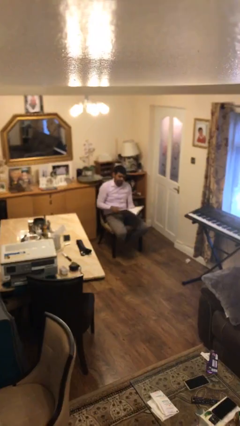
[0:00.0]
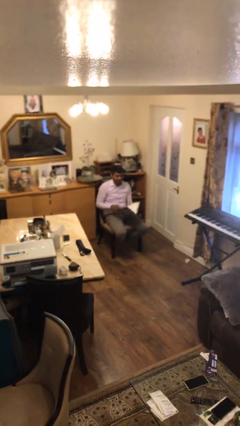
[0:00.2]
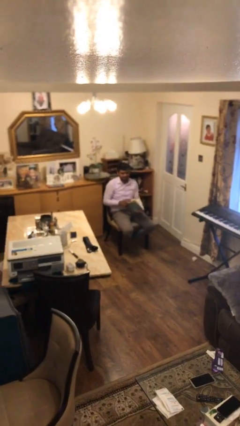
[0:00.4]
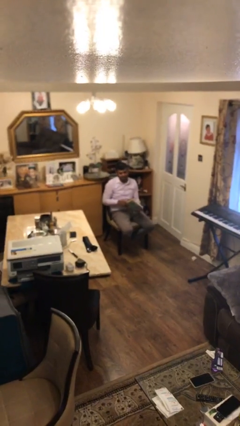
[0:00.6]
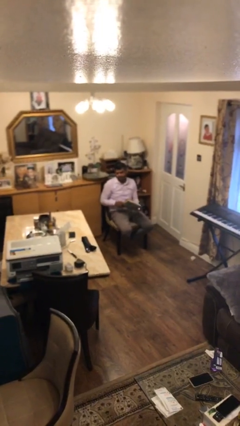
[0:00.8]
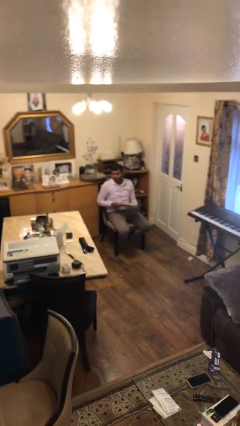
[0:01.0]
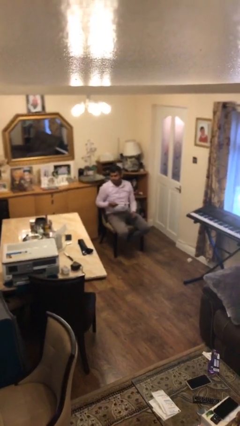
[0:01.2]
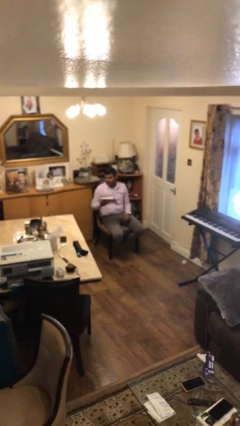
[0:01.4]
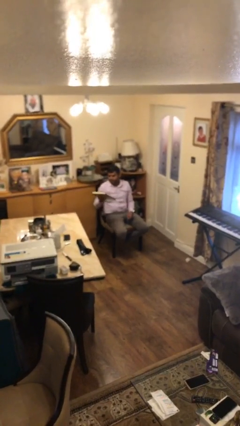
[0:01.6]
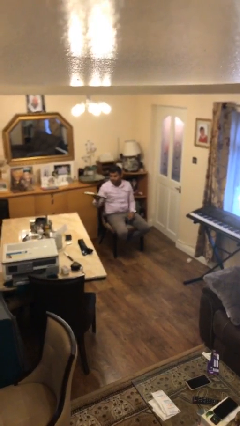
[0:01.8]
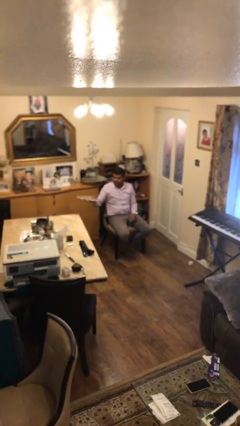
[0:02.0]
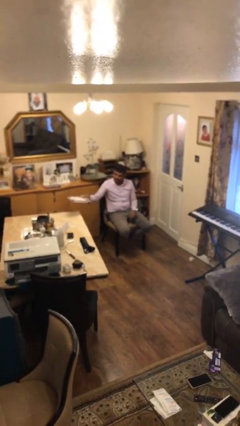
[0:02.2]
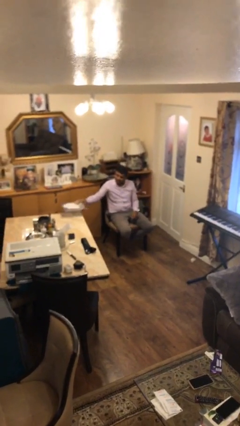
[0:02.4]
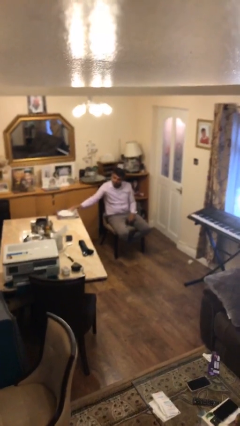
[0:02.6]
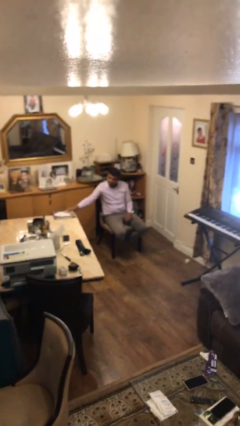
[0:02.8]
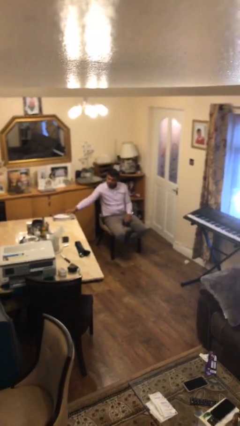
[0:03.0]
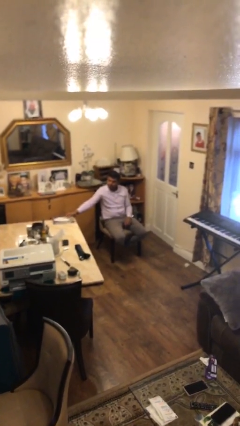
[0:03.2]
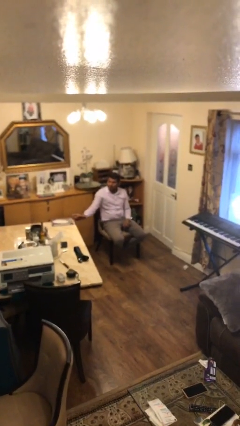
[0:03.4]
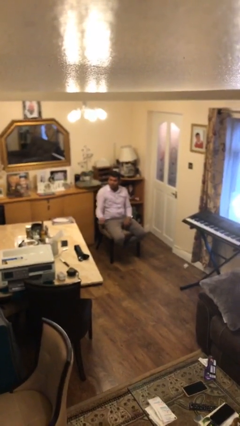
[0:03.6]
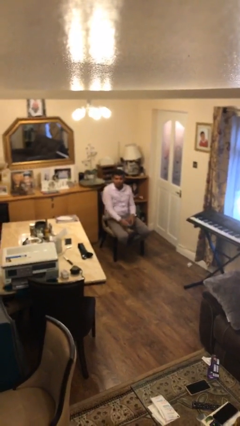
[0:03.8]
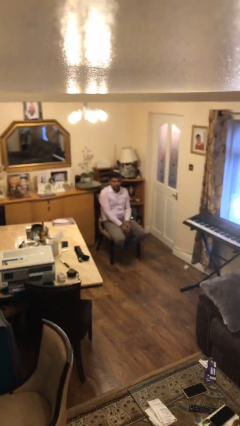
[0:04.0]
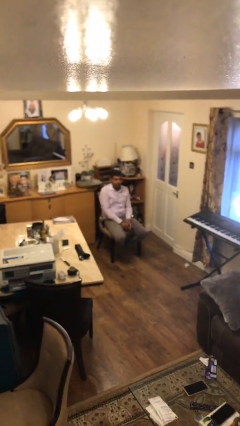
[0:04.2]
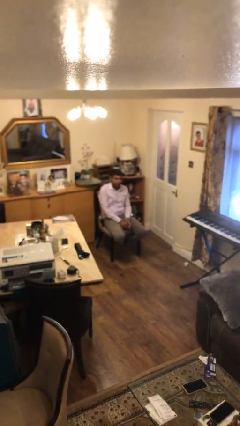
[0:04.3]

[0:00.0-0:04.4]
person puts down object on table

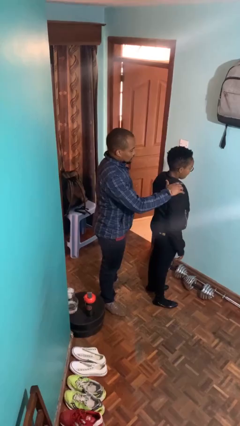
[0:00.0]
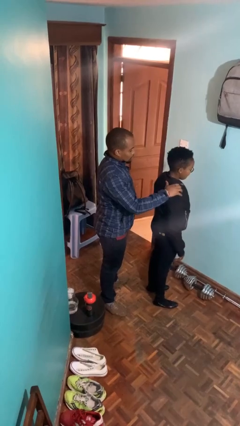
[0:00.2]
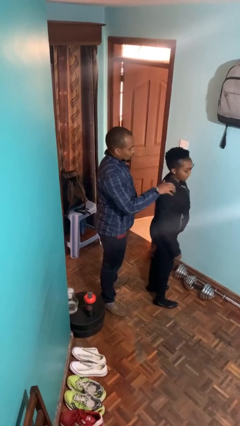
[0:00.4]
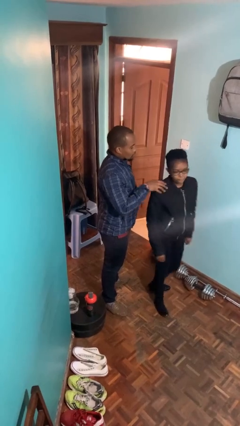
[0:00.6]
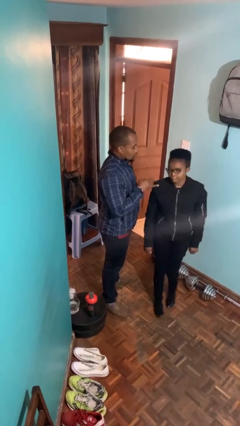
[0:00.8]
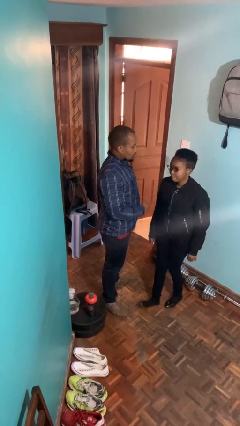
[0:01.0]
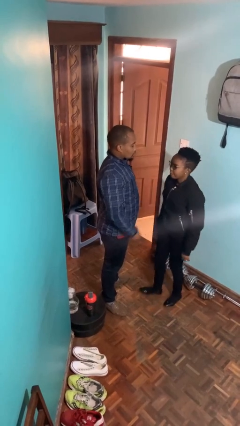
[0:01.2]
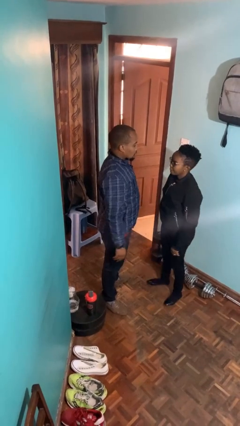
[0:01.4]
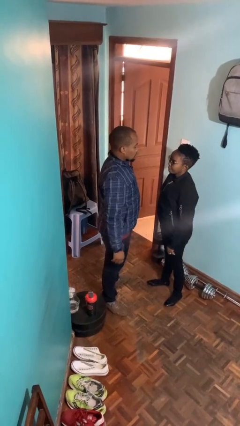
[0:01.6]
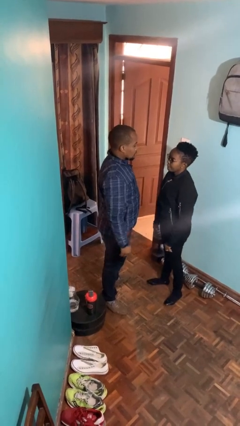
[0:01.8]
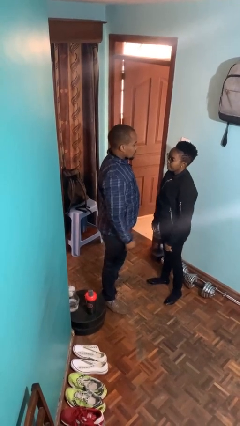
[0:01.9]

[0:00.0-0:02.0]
person spins person around

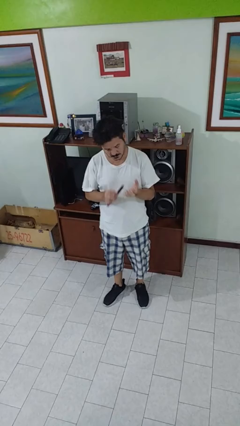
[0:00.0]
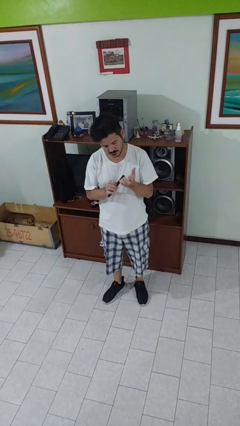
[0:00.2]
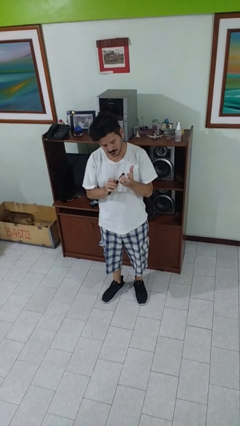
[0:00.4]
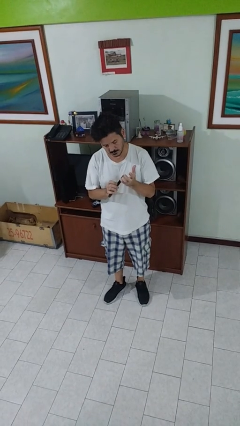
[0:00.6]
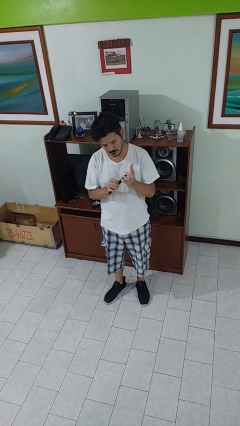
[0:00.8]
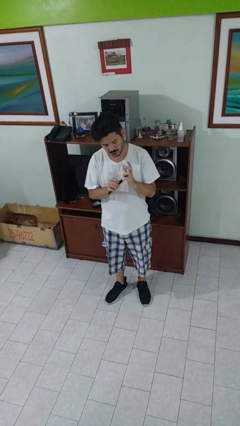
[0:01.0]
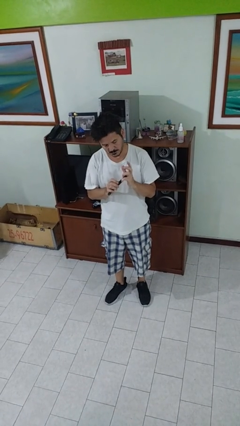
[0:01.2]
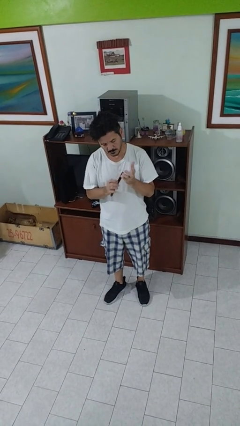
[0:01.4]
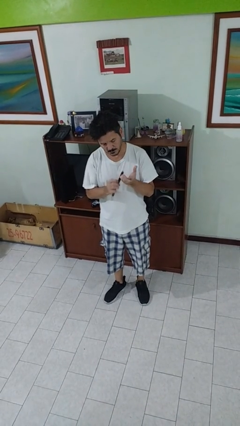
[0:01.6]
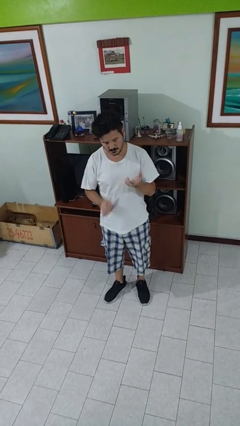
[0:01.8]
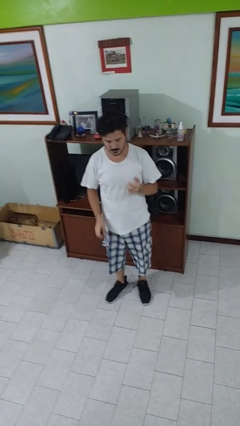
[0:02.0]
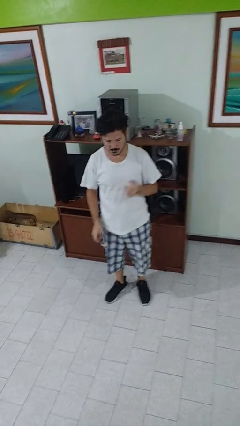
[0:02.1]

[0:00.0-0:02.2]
person files fingernails

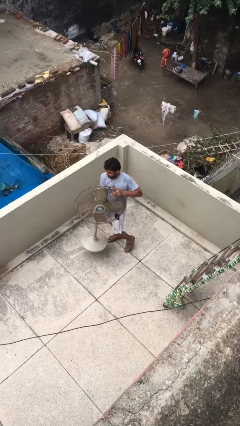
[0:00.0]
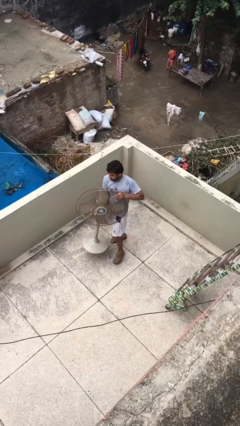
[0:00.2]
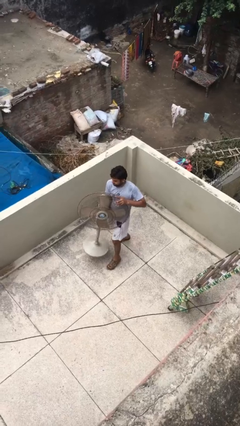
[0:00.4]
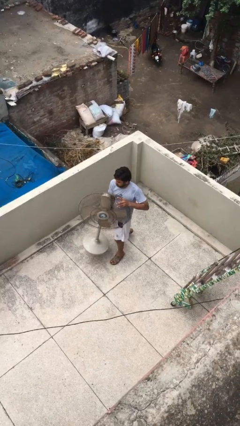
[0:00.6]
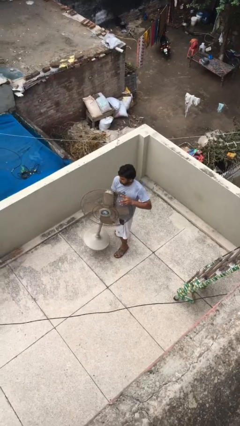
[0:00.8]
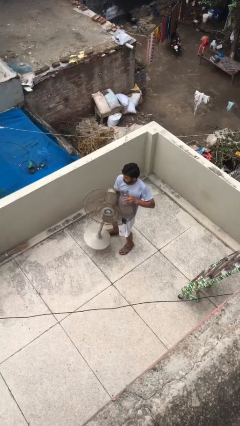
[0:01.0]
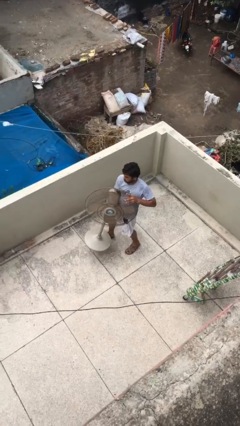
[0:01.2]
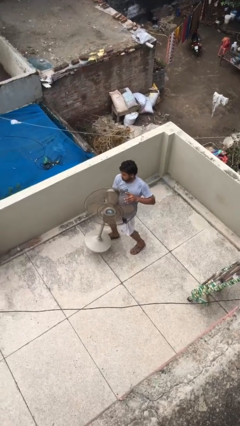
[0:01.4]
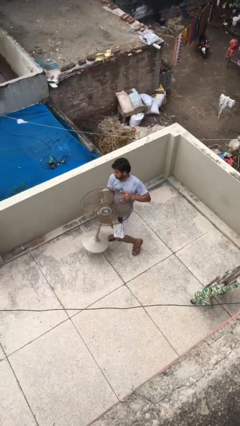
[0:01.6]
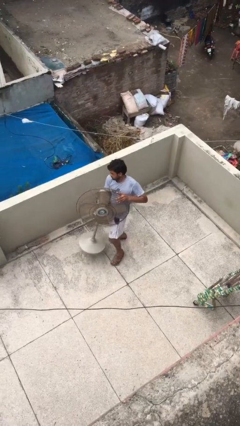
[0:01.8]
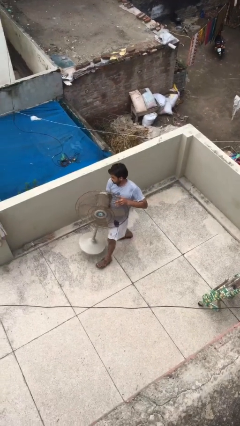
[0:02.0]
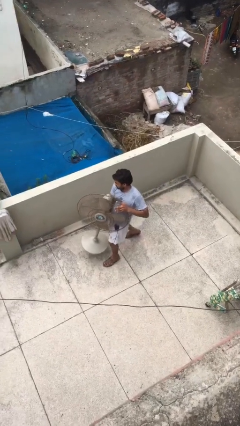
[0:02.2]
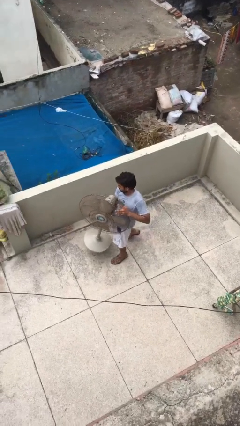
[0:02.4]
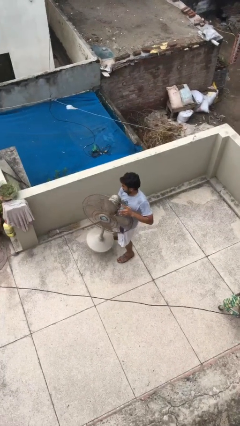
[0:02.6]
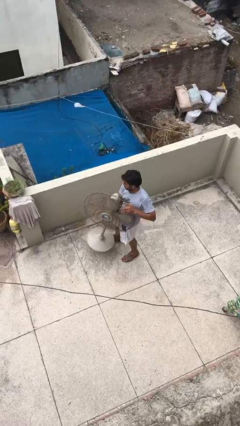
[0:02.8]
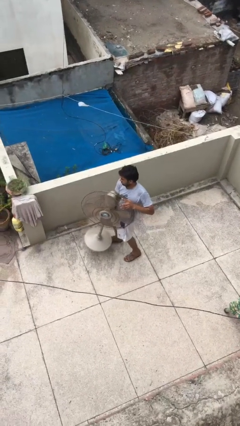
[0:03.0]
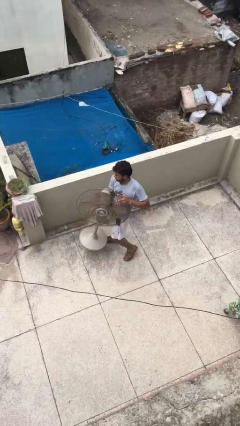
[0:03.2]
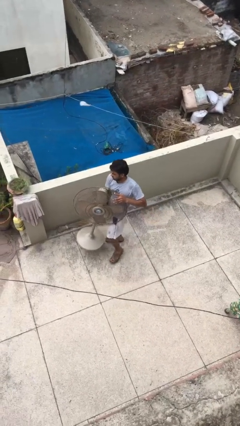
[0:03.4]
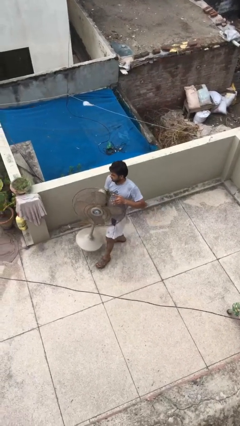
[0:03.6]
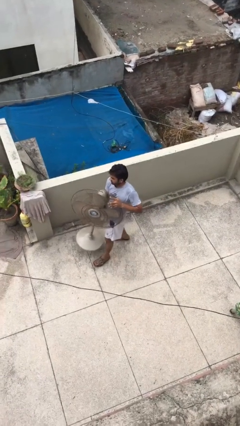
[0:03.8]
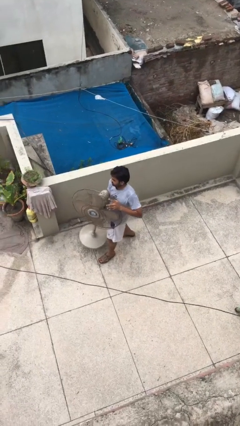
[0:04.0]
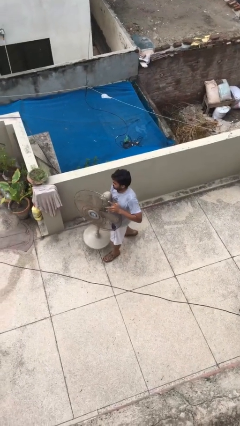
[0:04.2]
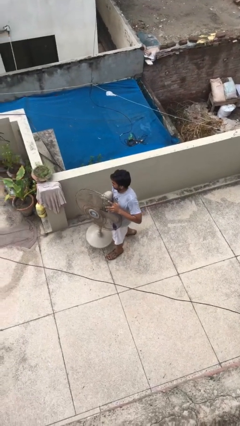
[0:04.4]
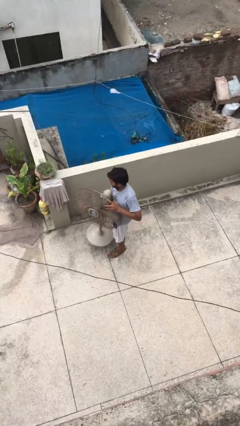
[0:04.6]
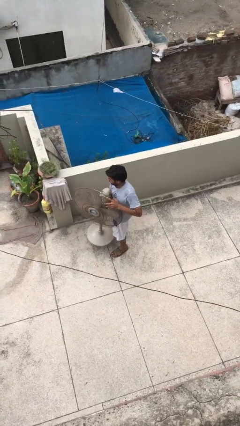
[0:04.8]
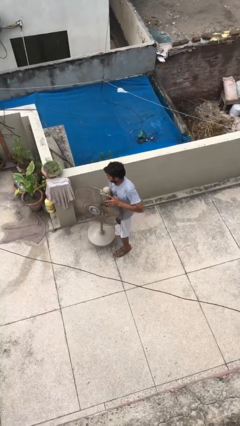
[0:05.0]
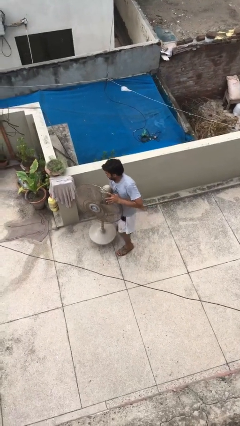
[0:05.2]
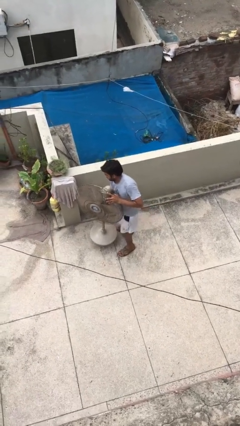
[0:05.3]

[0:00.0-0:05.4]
person carries heavy object

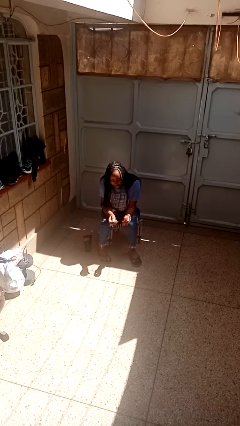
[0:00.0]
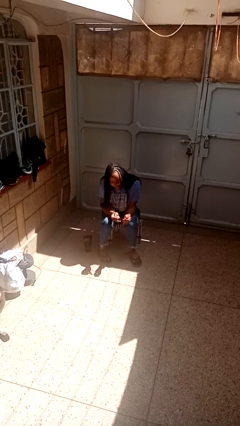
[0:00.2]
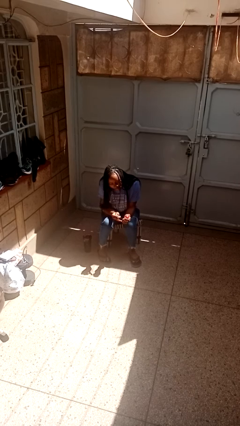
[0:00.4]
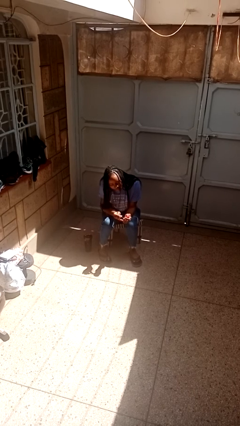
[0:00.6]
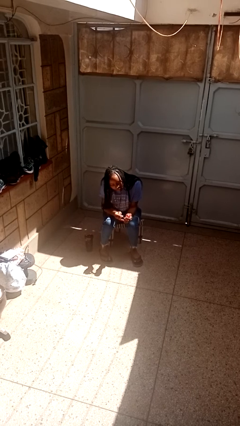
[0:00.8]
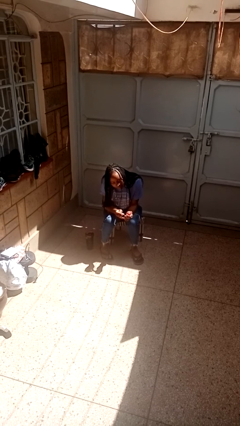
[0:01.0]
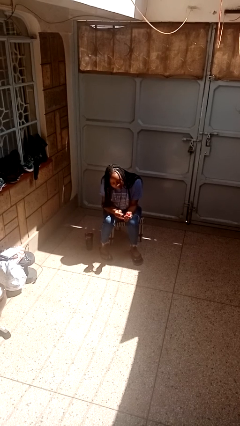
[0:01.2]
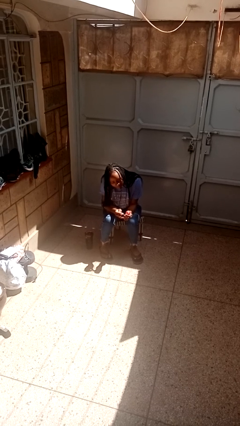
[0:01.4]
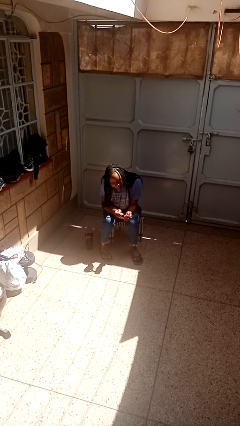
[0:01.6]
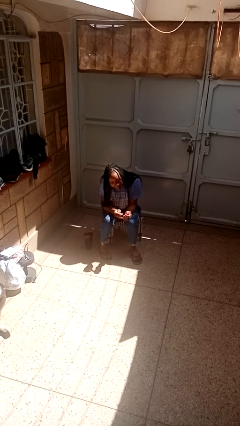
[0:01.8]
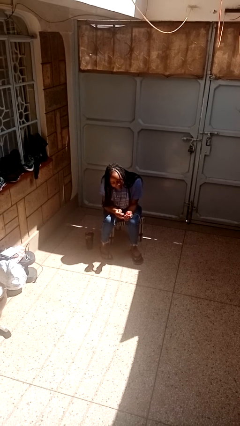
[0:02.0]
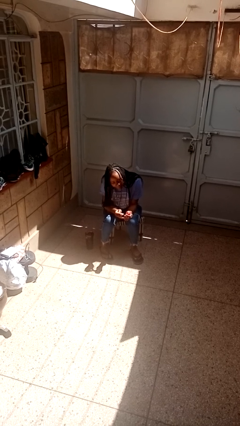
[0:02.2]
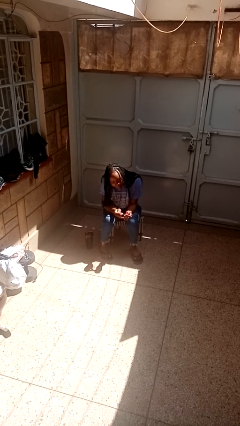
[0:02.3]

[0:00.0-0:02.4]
person paints fingernails

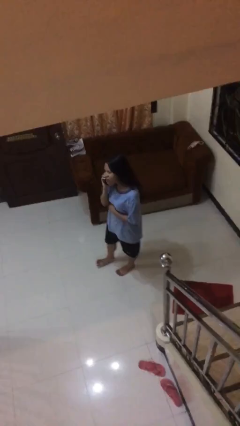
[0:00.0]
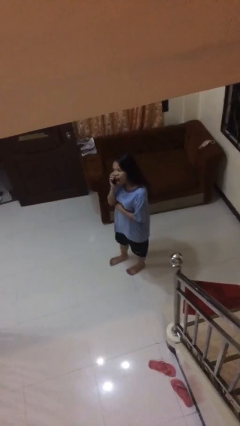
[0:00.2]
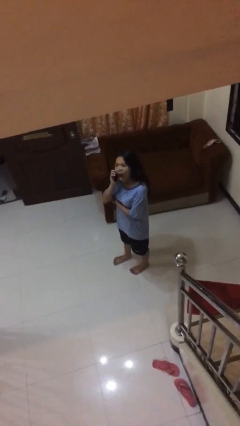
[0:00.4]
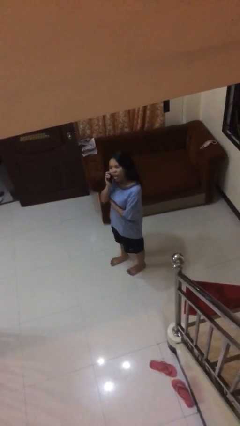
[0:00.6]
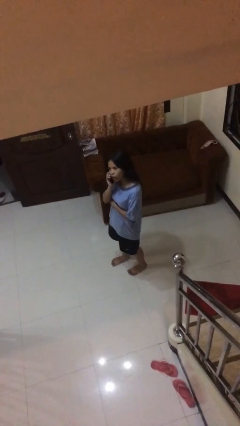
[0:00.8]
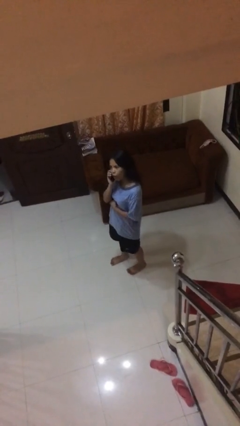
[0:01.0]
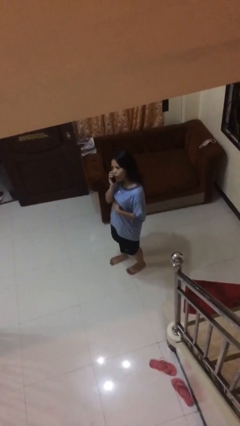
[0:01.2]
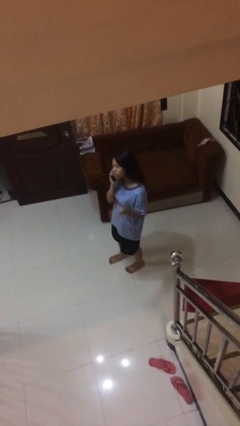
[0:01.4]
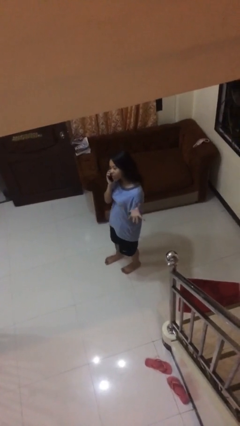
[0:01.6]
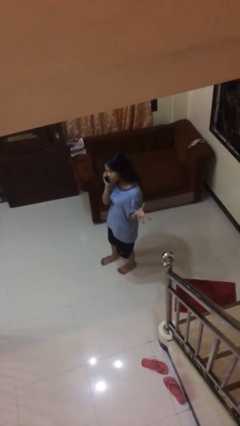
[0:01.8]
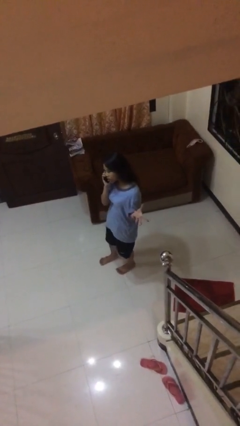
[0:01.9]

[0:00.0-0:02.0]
person talks on phone
